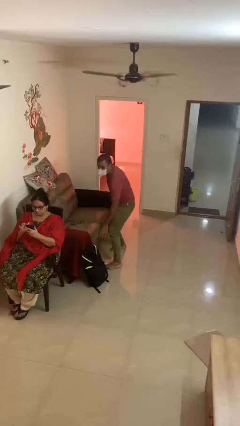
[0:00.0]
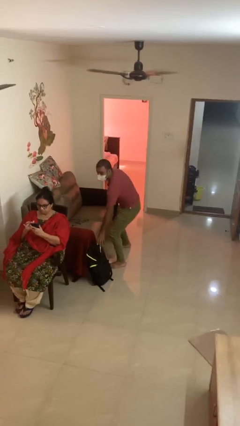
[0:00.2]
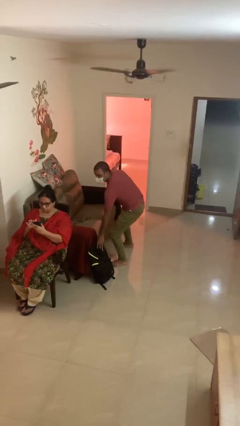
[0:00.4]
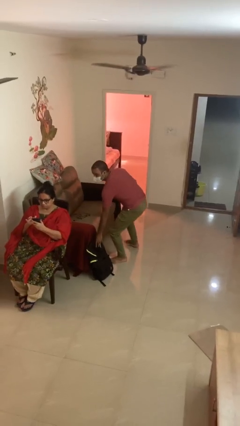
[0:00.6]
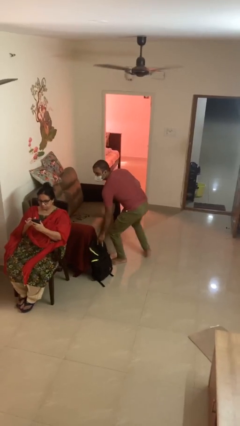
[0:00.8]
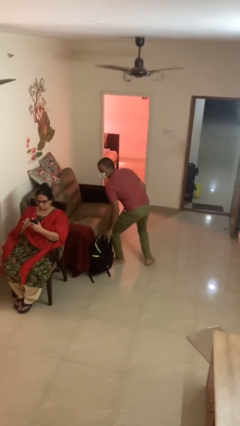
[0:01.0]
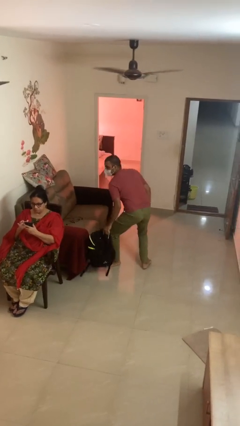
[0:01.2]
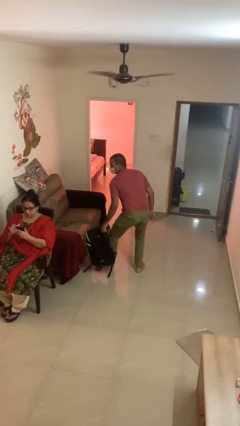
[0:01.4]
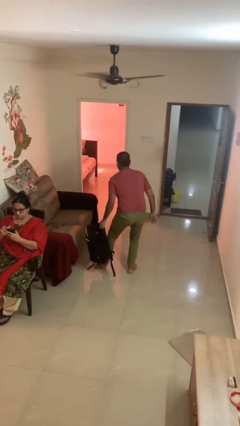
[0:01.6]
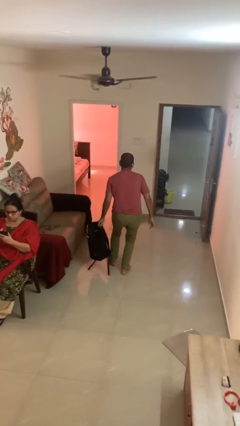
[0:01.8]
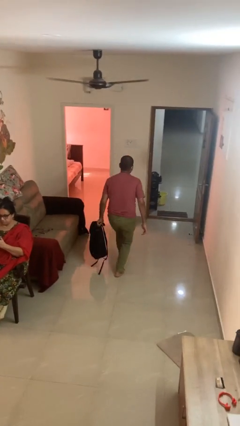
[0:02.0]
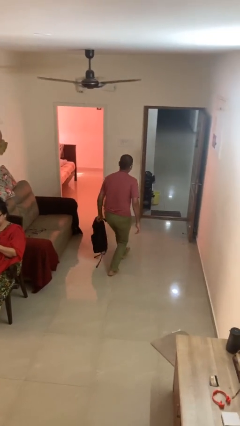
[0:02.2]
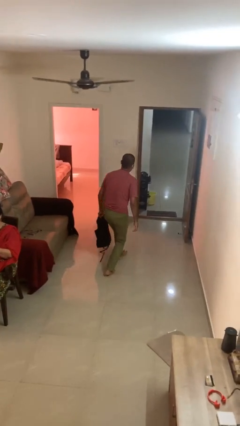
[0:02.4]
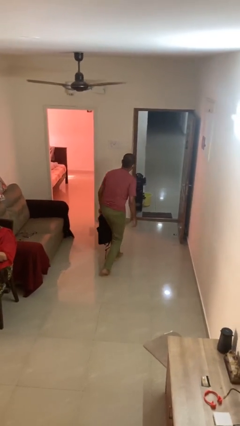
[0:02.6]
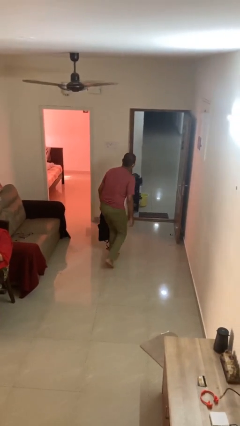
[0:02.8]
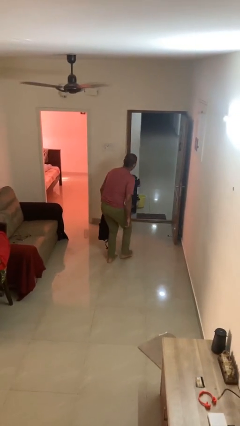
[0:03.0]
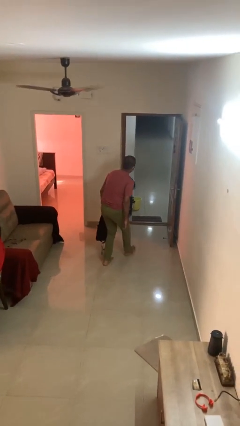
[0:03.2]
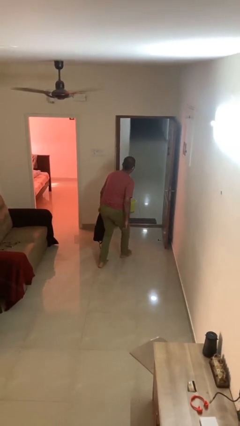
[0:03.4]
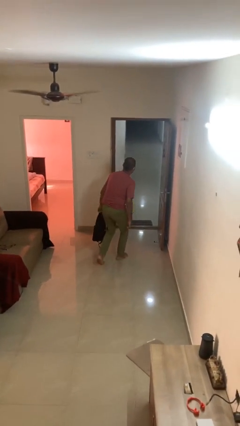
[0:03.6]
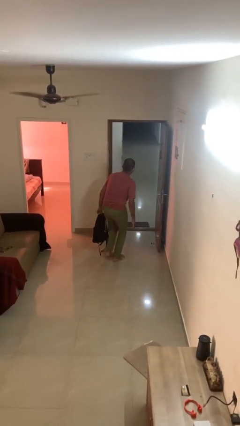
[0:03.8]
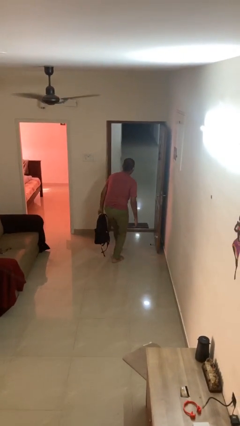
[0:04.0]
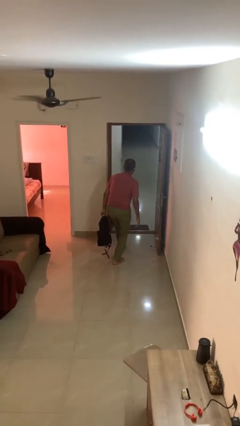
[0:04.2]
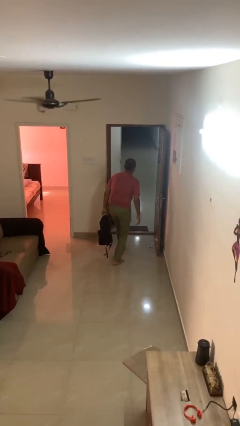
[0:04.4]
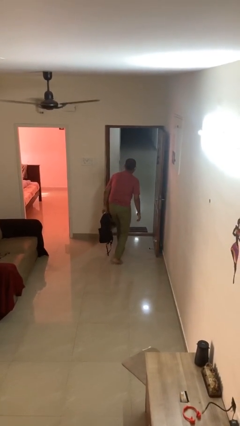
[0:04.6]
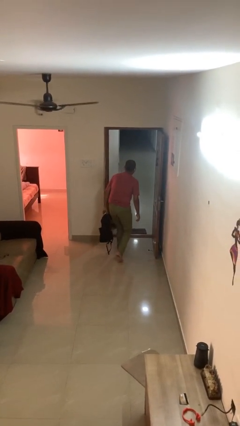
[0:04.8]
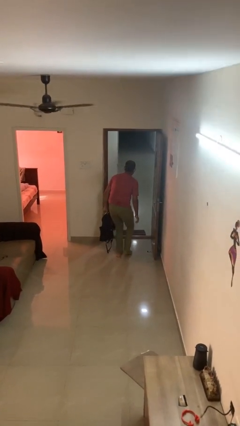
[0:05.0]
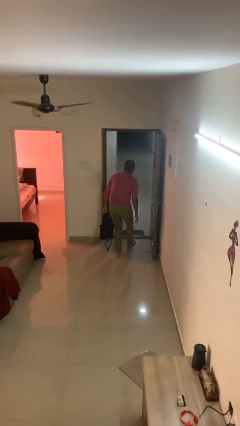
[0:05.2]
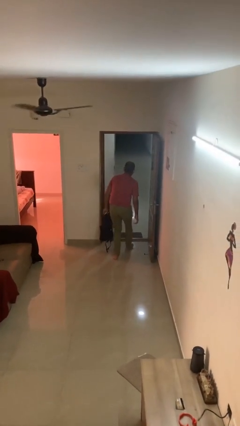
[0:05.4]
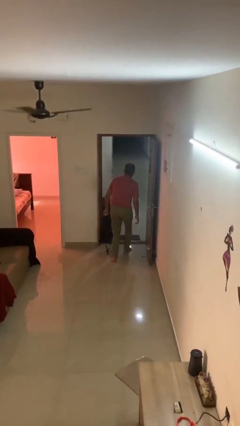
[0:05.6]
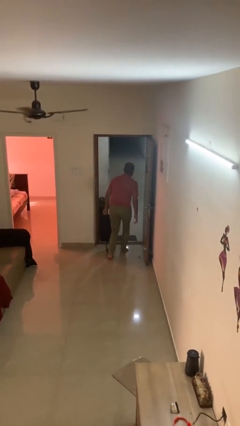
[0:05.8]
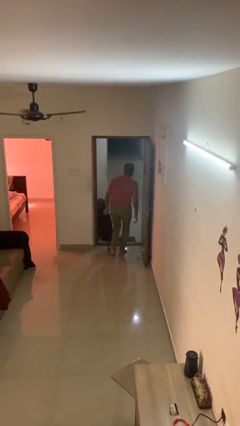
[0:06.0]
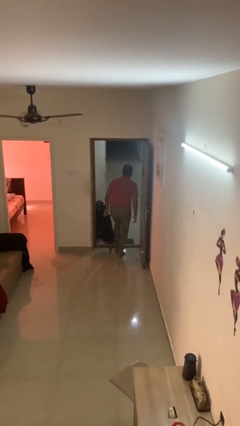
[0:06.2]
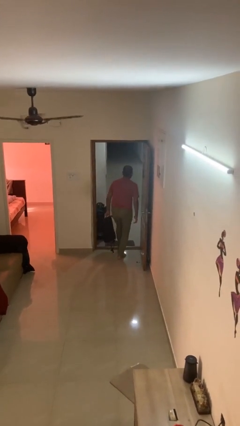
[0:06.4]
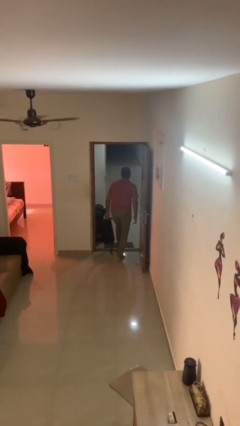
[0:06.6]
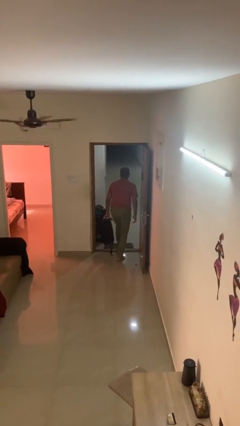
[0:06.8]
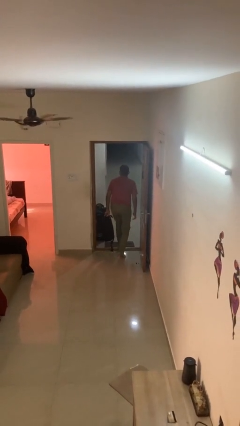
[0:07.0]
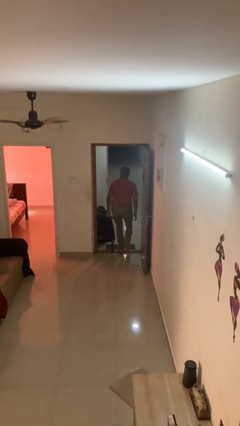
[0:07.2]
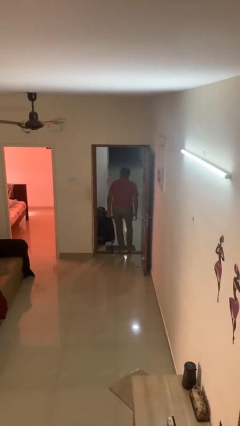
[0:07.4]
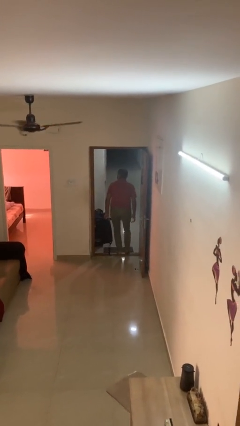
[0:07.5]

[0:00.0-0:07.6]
person steals object from person

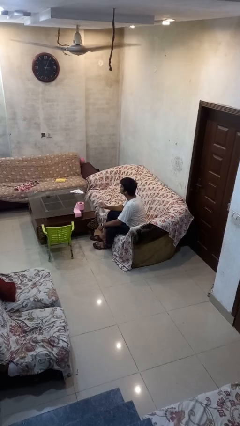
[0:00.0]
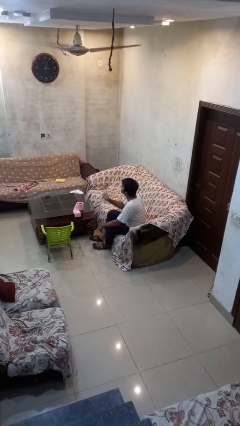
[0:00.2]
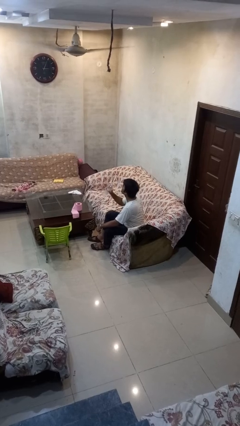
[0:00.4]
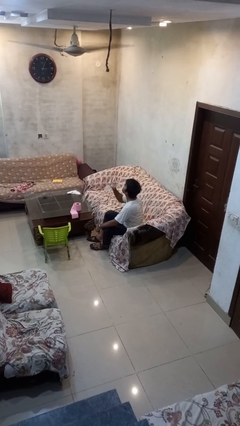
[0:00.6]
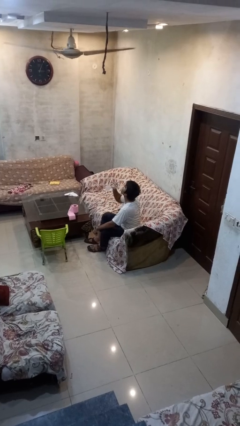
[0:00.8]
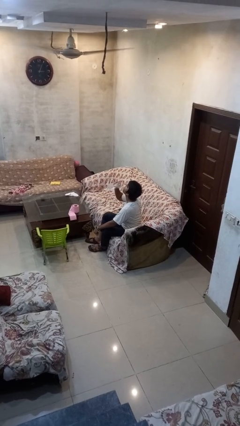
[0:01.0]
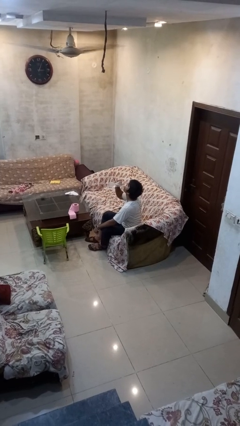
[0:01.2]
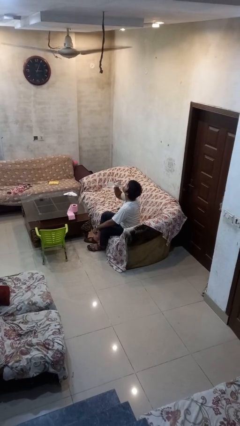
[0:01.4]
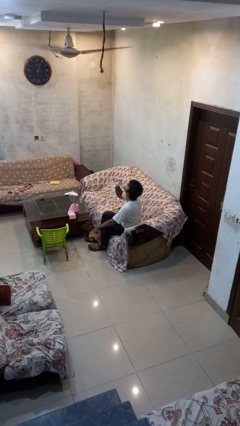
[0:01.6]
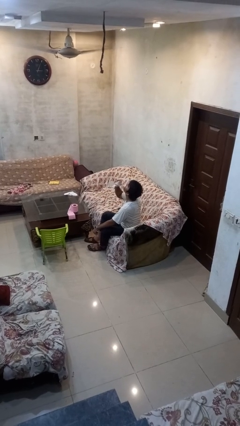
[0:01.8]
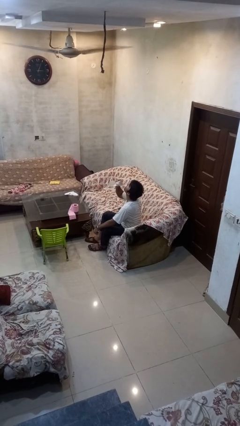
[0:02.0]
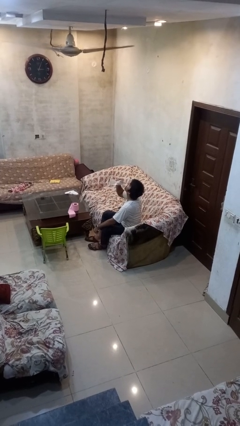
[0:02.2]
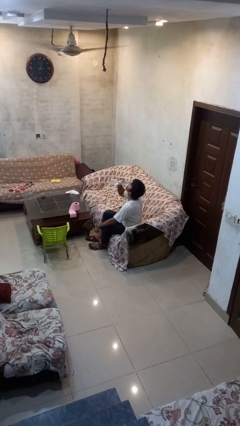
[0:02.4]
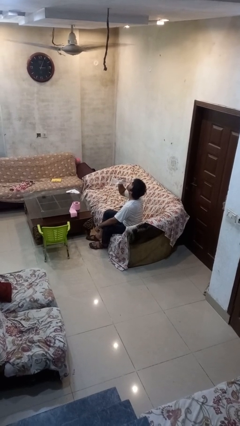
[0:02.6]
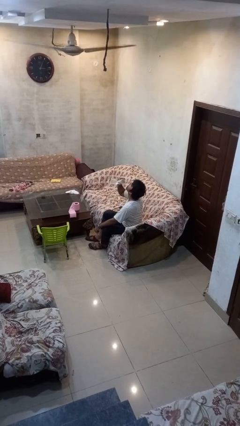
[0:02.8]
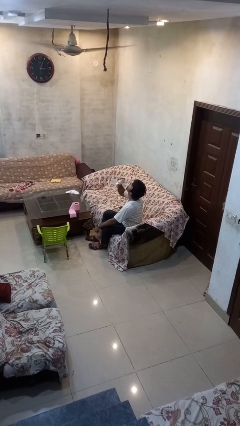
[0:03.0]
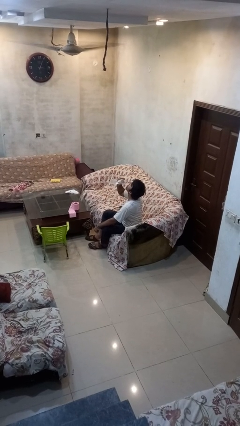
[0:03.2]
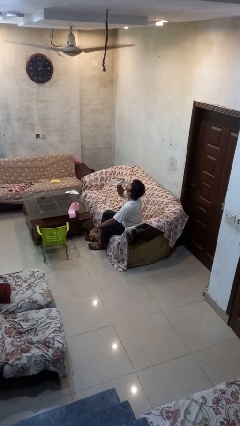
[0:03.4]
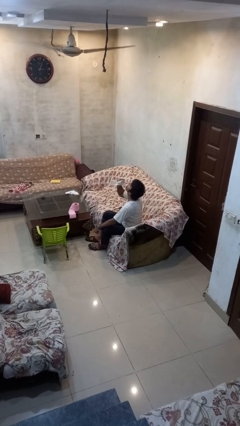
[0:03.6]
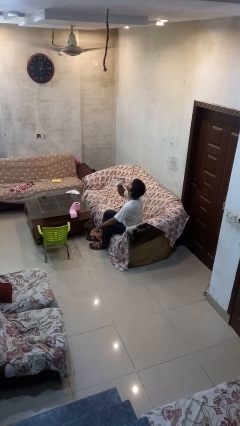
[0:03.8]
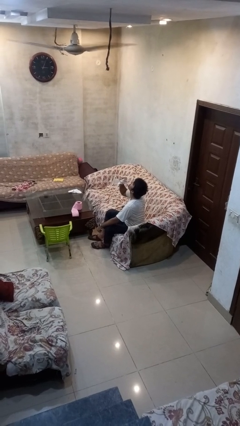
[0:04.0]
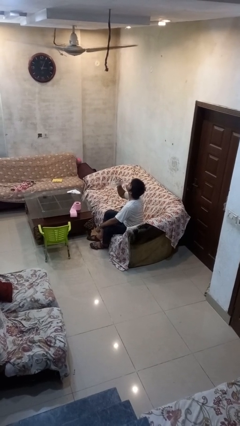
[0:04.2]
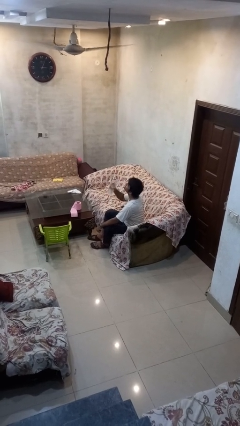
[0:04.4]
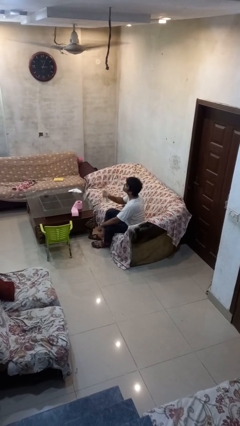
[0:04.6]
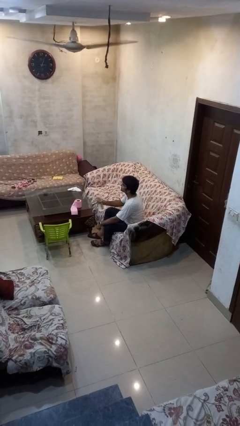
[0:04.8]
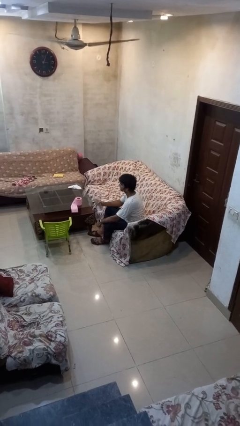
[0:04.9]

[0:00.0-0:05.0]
person drinks from bottle

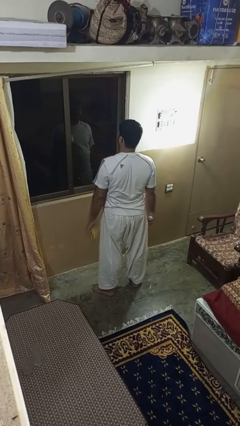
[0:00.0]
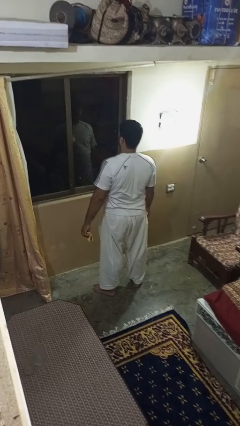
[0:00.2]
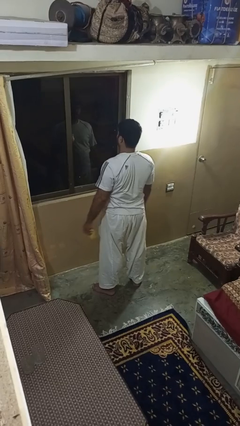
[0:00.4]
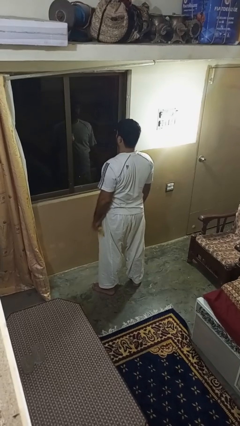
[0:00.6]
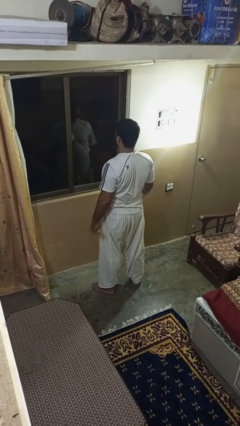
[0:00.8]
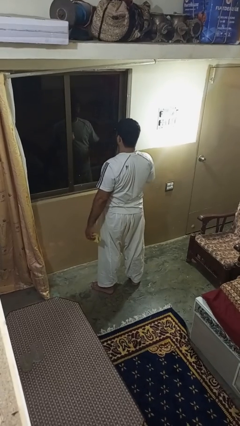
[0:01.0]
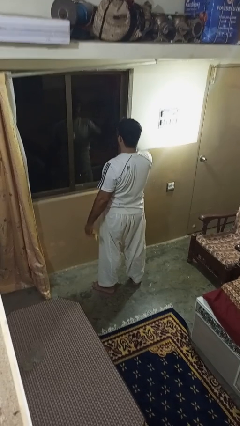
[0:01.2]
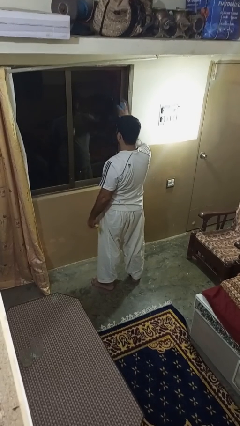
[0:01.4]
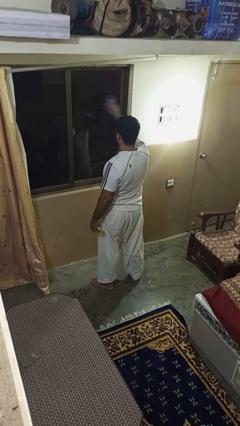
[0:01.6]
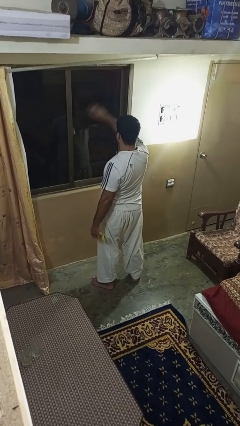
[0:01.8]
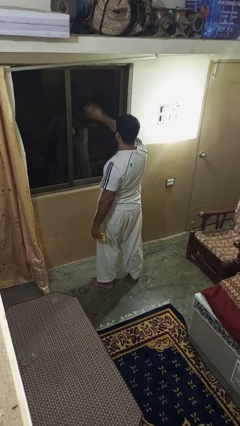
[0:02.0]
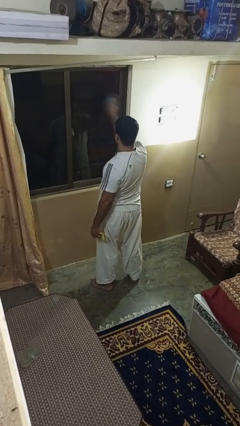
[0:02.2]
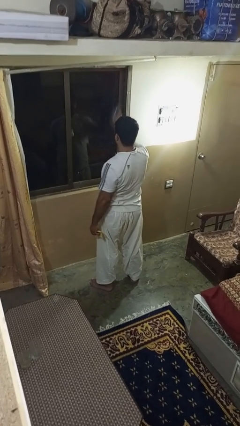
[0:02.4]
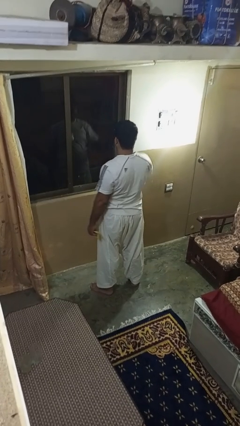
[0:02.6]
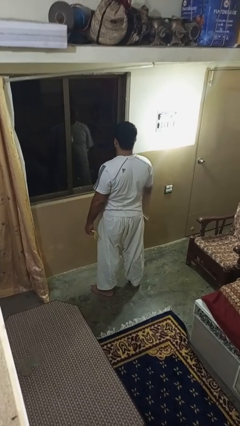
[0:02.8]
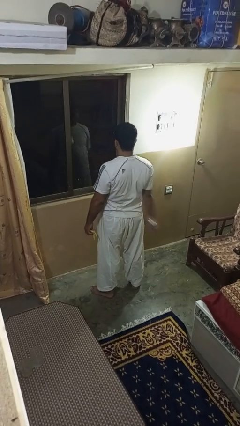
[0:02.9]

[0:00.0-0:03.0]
person sprays from bottle

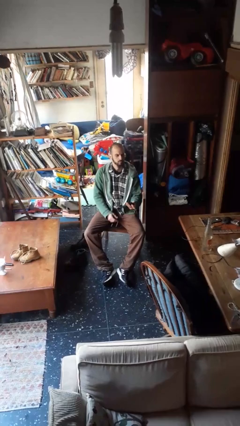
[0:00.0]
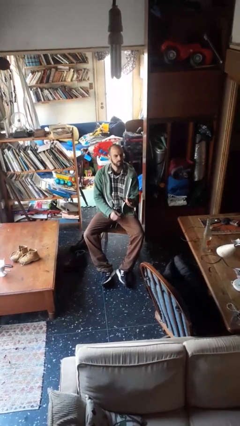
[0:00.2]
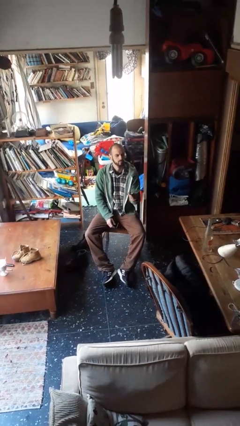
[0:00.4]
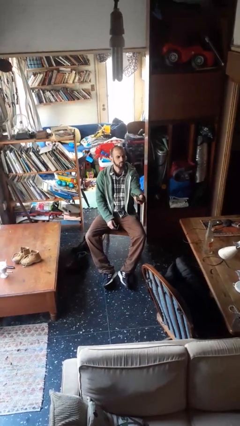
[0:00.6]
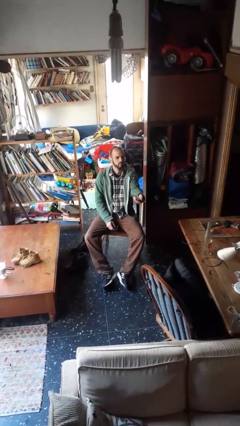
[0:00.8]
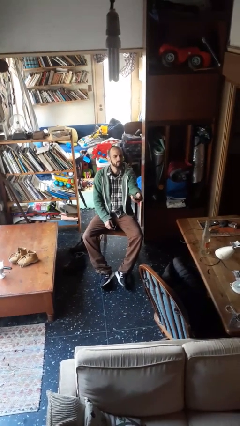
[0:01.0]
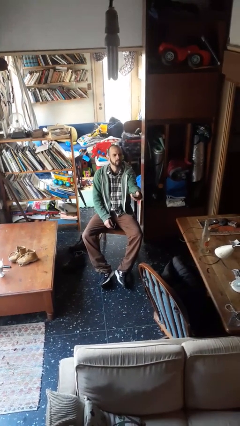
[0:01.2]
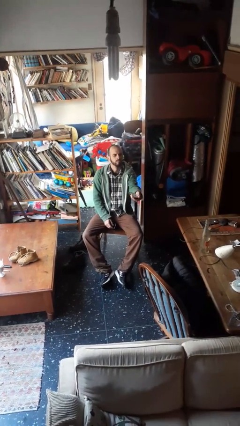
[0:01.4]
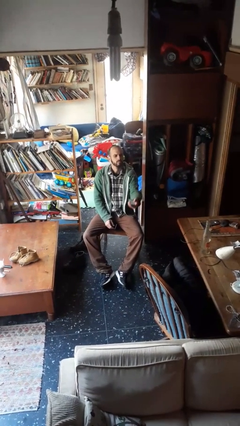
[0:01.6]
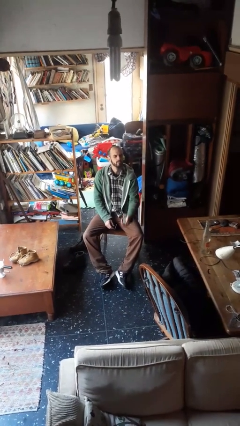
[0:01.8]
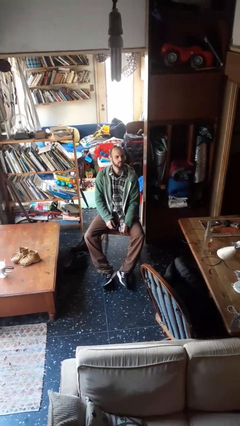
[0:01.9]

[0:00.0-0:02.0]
person uses television remote

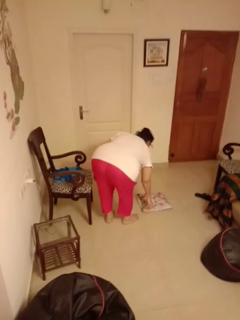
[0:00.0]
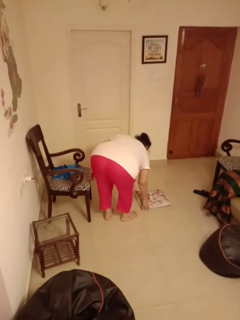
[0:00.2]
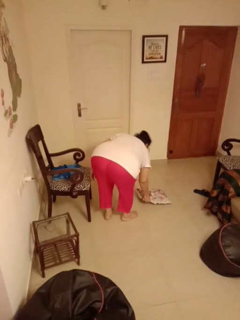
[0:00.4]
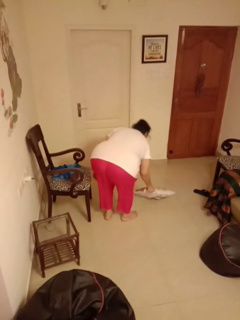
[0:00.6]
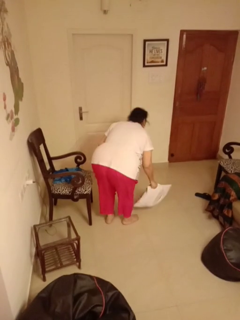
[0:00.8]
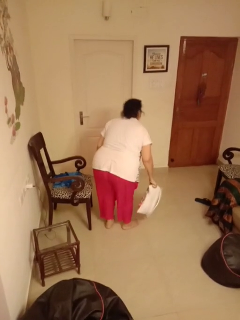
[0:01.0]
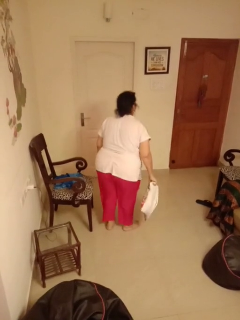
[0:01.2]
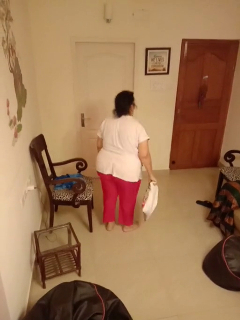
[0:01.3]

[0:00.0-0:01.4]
person picks up object from floor
